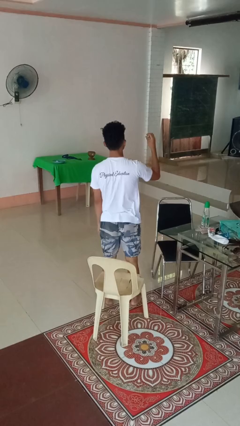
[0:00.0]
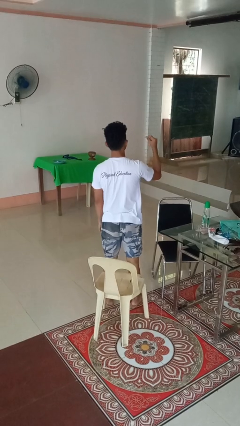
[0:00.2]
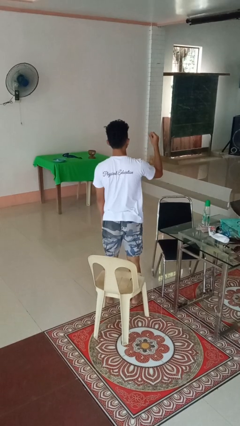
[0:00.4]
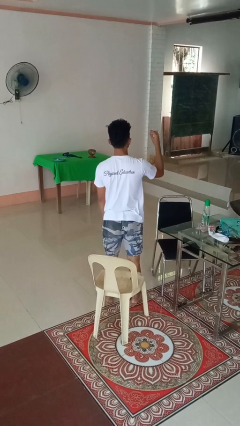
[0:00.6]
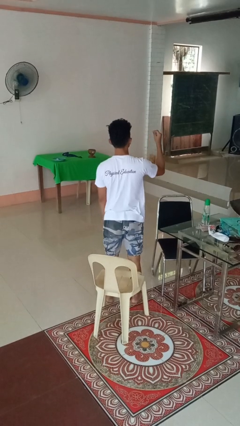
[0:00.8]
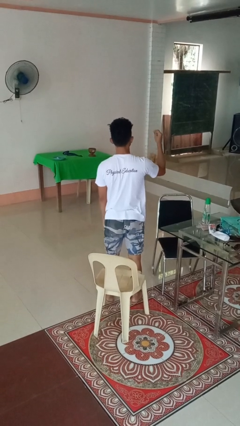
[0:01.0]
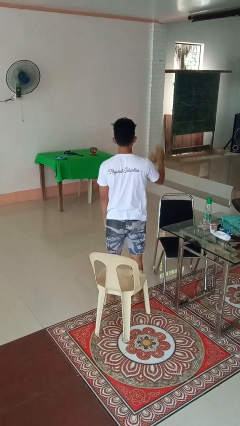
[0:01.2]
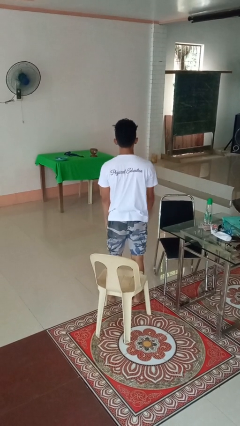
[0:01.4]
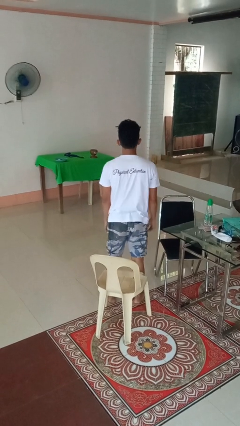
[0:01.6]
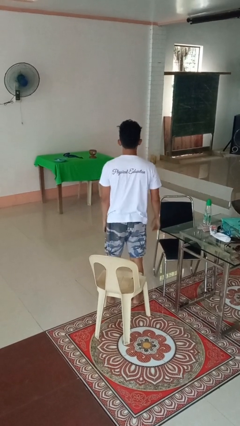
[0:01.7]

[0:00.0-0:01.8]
person snaps fingers

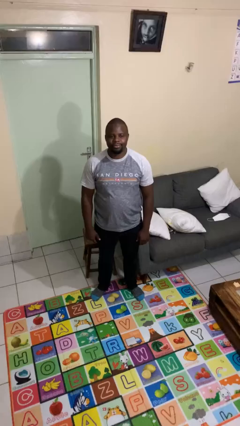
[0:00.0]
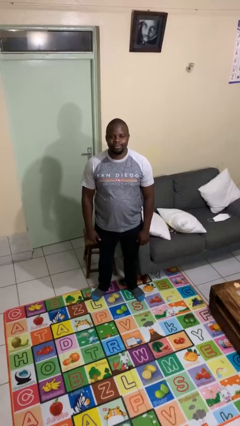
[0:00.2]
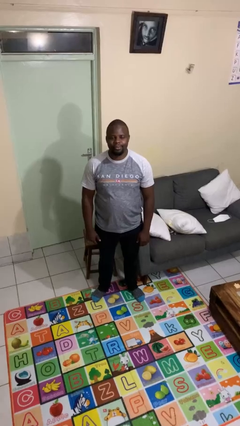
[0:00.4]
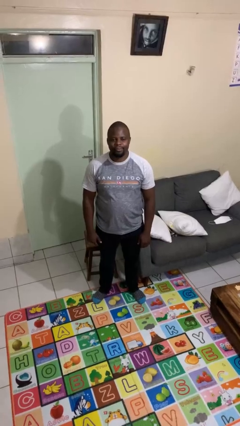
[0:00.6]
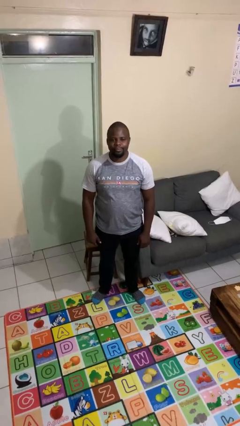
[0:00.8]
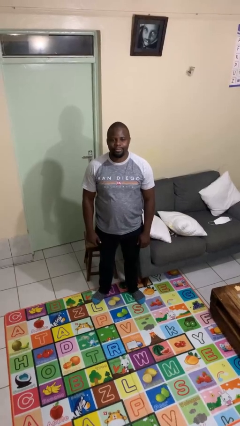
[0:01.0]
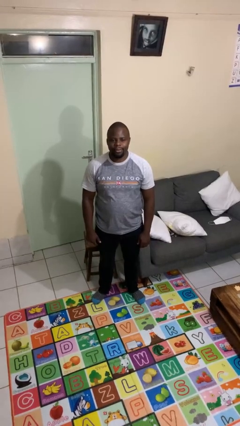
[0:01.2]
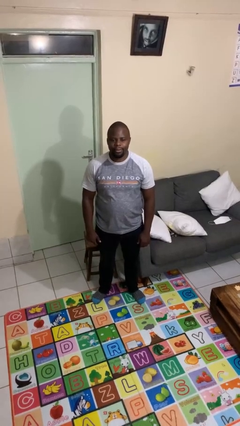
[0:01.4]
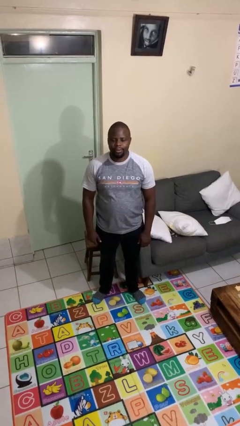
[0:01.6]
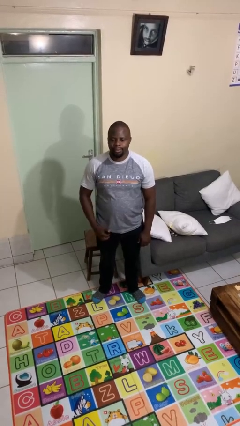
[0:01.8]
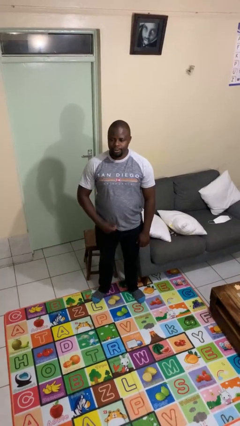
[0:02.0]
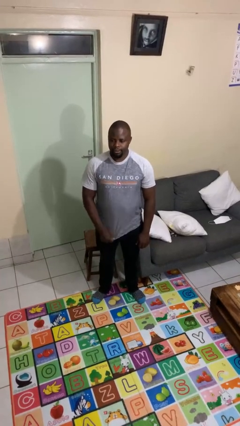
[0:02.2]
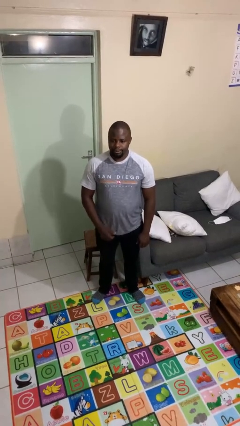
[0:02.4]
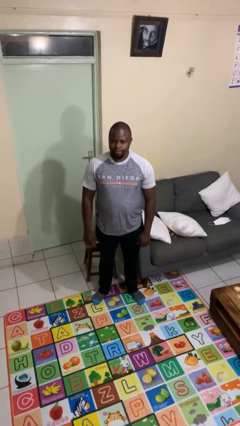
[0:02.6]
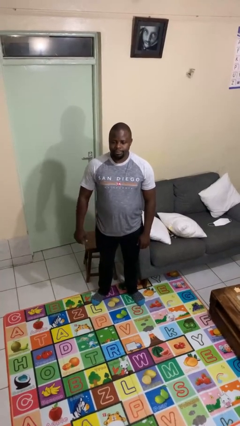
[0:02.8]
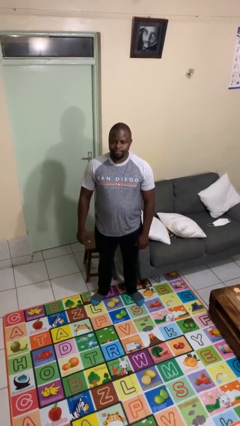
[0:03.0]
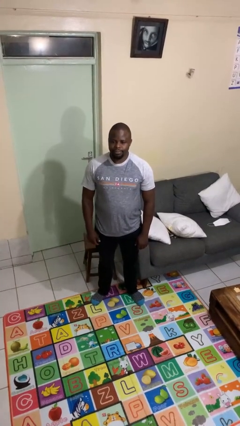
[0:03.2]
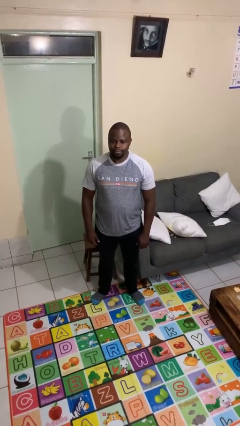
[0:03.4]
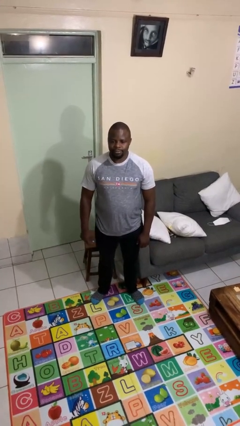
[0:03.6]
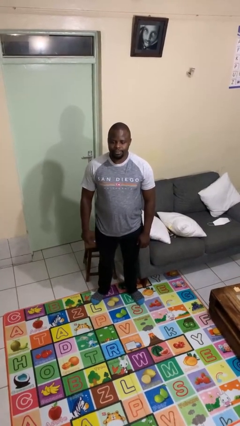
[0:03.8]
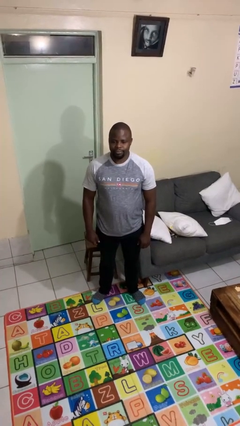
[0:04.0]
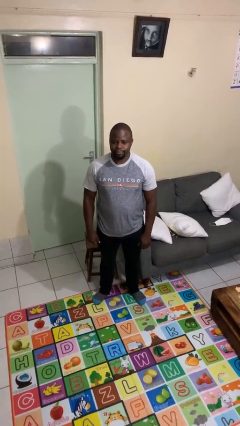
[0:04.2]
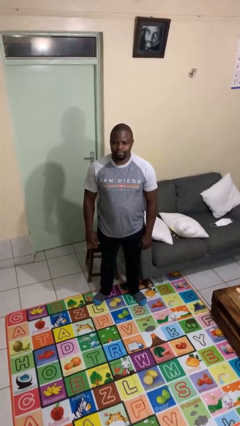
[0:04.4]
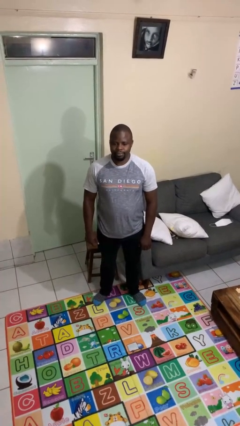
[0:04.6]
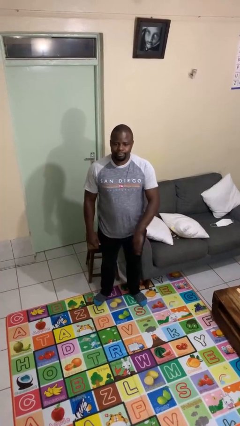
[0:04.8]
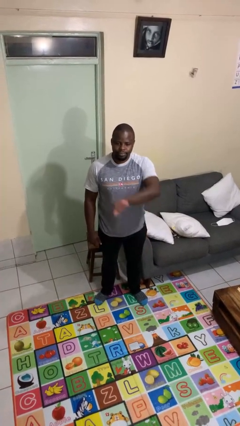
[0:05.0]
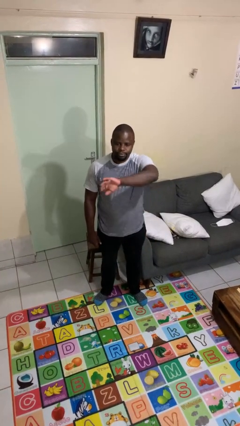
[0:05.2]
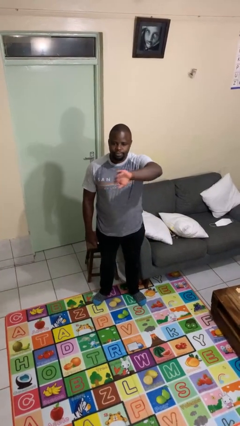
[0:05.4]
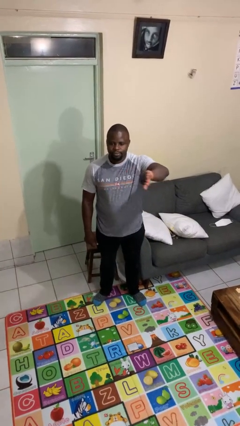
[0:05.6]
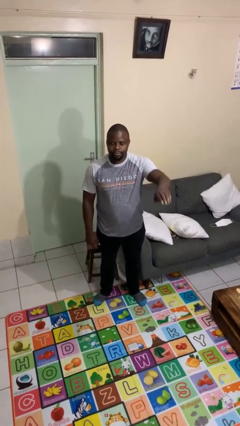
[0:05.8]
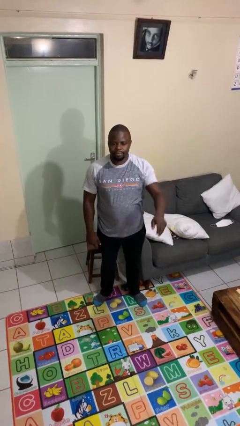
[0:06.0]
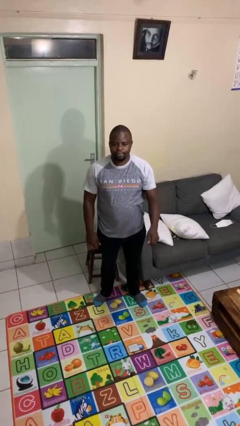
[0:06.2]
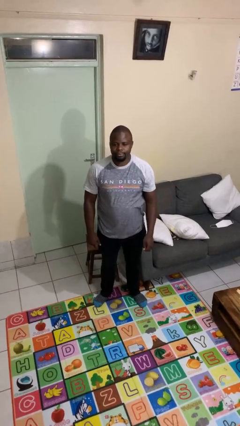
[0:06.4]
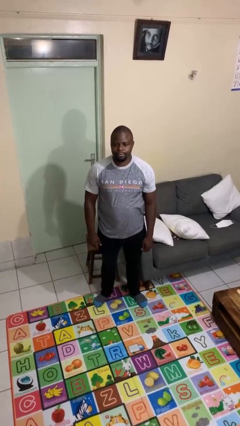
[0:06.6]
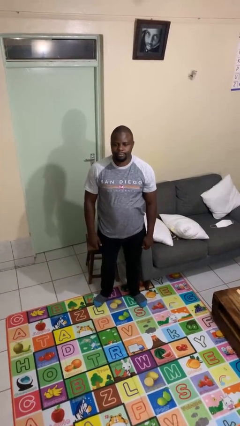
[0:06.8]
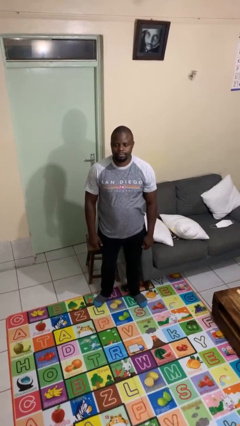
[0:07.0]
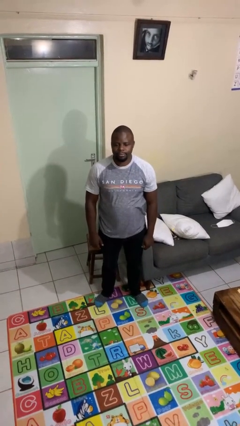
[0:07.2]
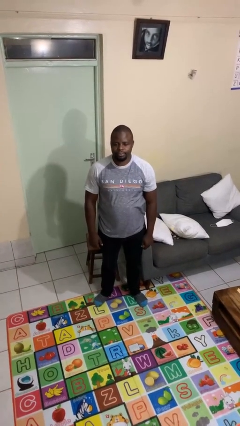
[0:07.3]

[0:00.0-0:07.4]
person gestures swipe left

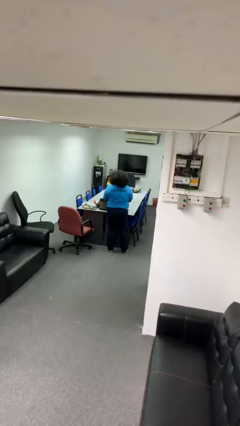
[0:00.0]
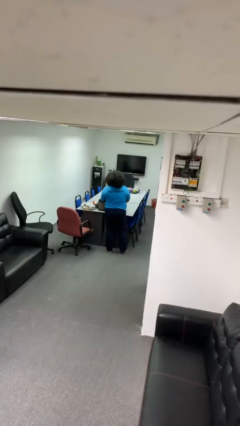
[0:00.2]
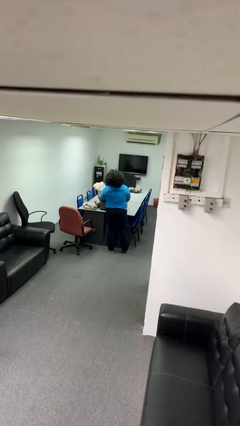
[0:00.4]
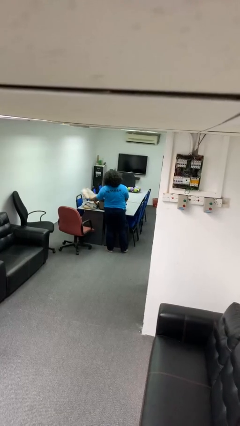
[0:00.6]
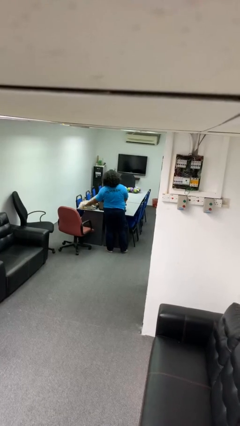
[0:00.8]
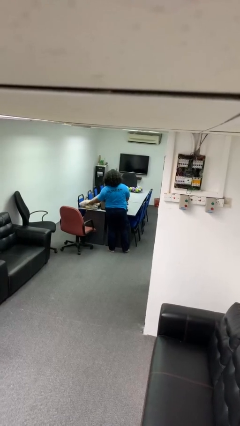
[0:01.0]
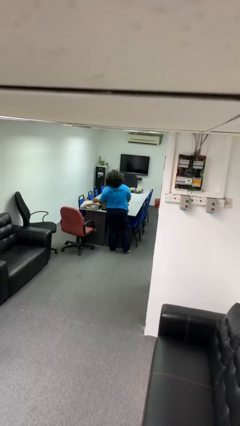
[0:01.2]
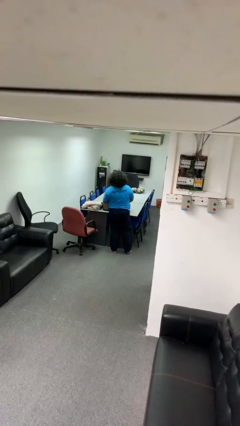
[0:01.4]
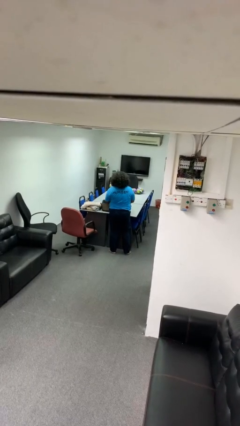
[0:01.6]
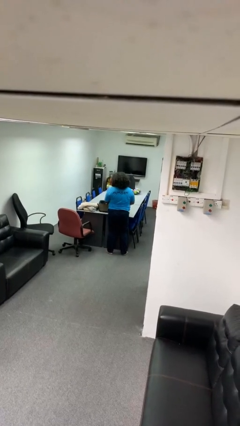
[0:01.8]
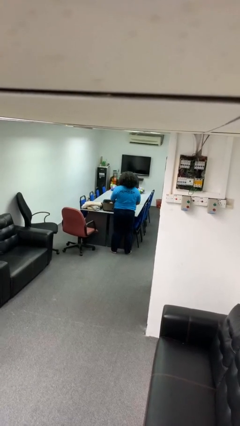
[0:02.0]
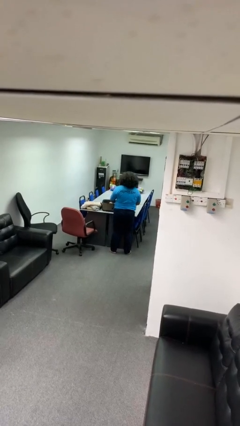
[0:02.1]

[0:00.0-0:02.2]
person unloads clothes from suitcase

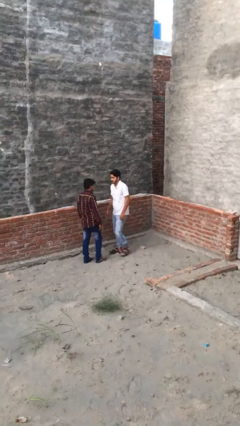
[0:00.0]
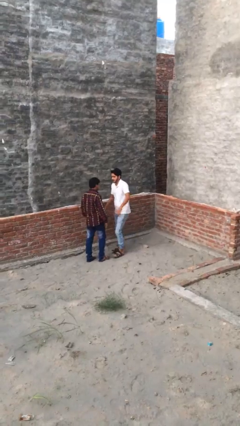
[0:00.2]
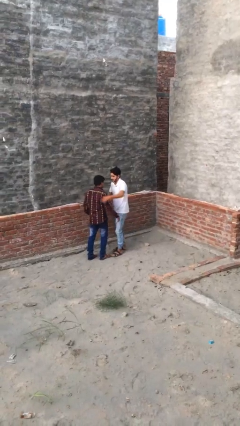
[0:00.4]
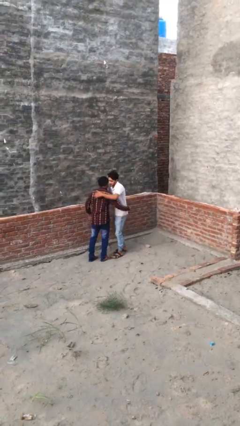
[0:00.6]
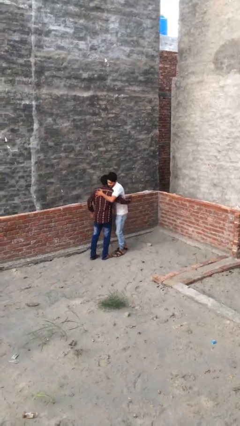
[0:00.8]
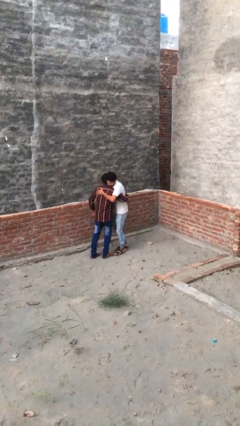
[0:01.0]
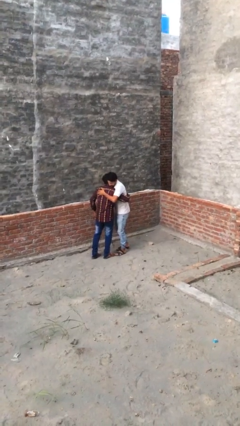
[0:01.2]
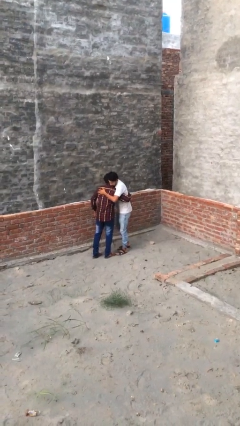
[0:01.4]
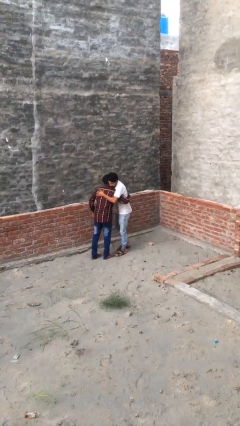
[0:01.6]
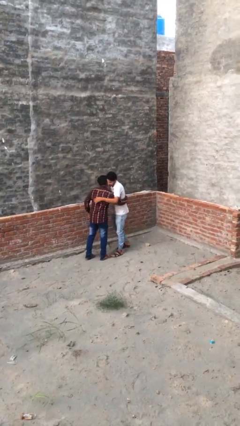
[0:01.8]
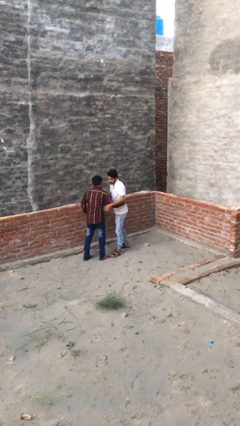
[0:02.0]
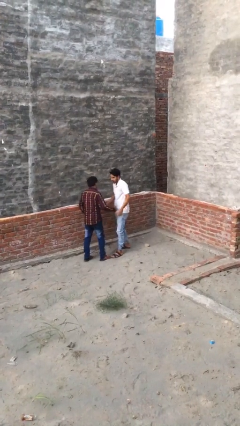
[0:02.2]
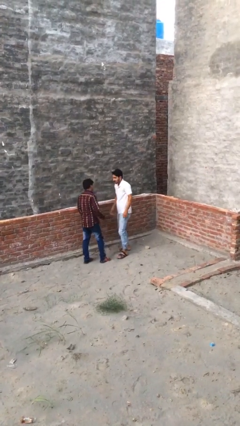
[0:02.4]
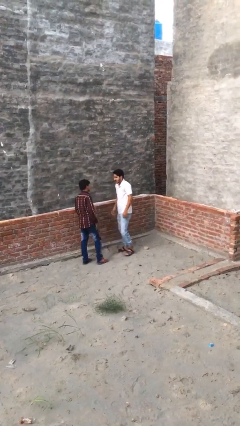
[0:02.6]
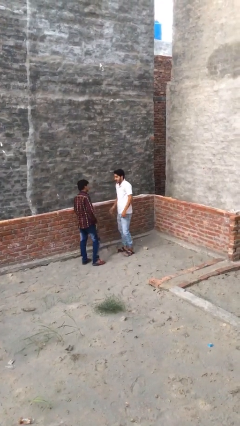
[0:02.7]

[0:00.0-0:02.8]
person embraces person

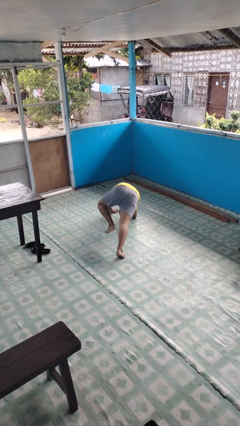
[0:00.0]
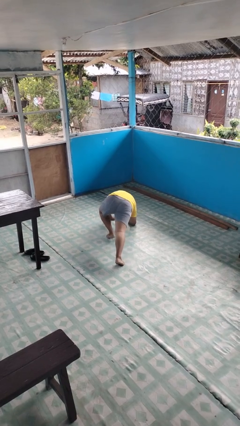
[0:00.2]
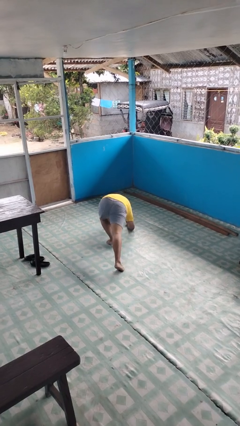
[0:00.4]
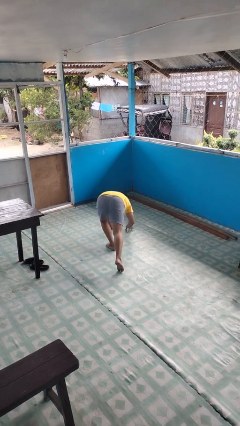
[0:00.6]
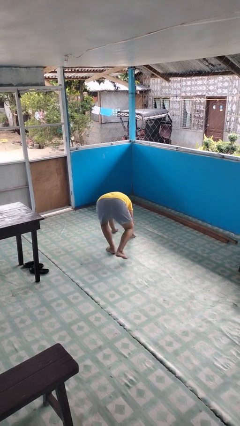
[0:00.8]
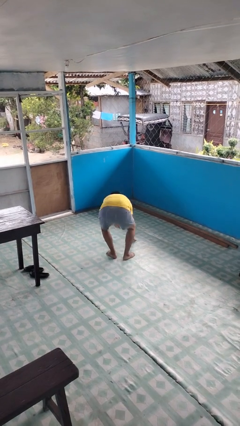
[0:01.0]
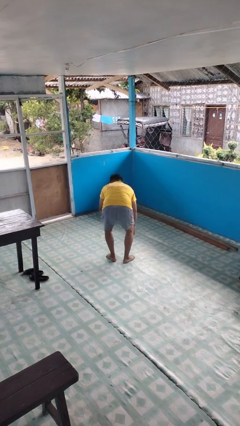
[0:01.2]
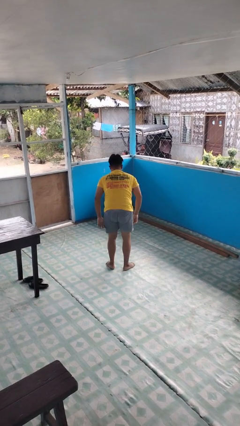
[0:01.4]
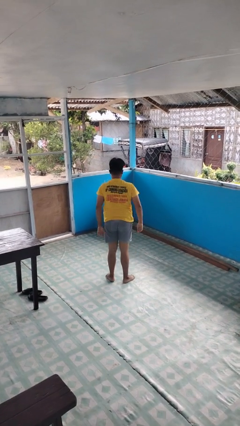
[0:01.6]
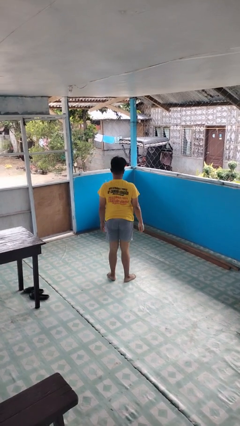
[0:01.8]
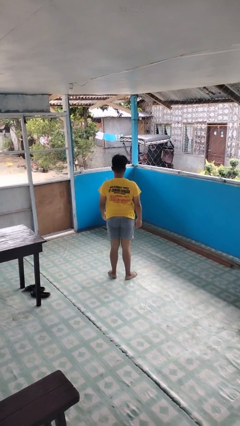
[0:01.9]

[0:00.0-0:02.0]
person stands up from floor

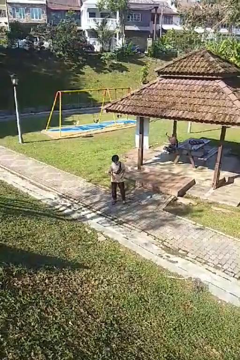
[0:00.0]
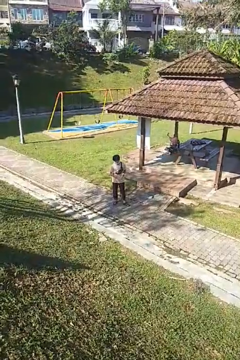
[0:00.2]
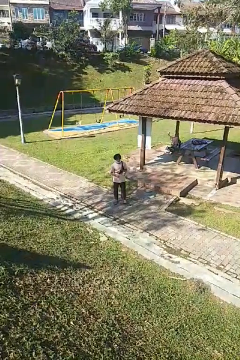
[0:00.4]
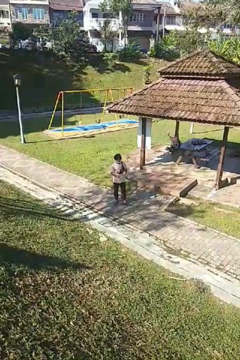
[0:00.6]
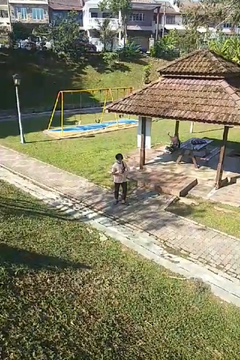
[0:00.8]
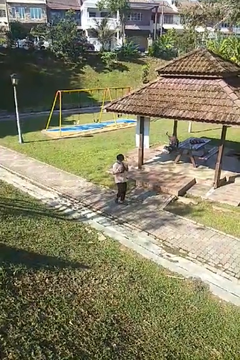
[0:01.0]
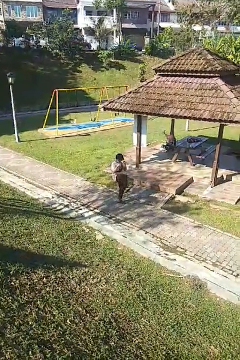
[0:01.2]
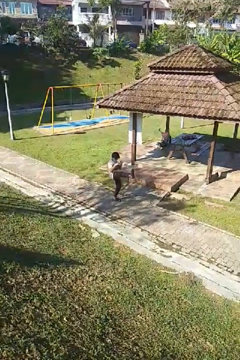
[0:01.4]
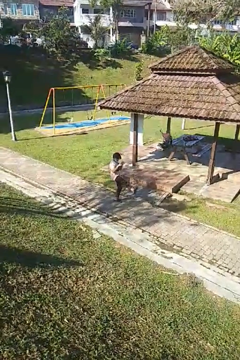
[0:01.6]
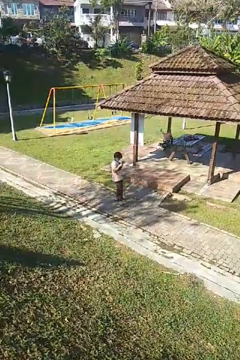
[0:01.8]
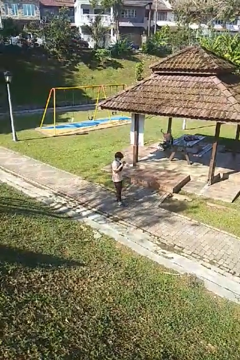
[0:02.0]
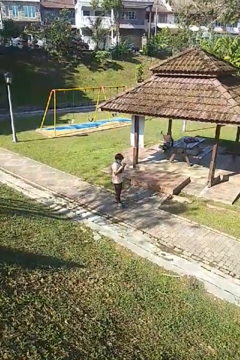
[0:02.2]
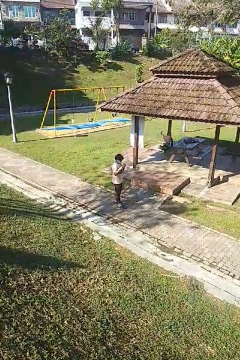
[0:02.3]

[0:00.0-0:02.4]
person karate kicks
